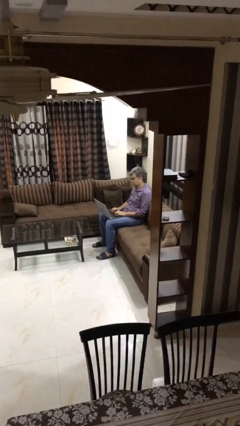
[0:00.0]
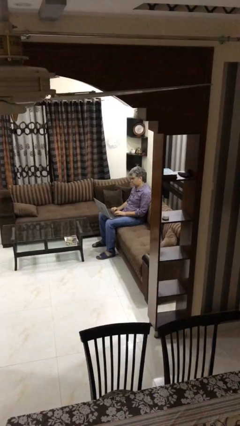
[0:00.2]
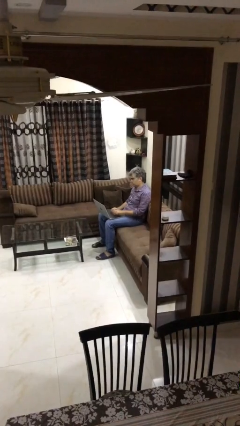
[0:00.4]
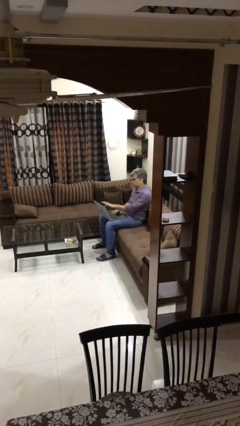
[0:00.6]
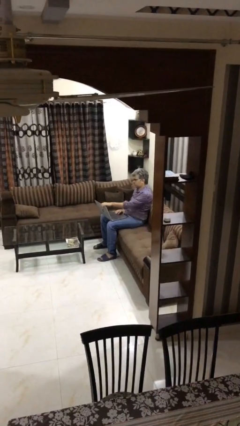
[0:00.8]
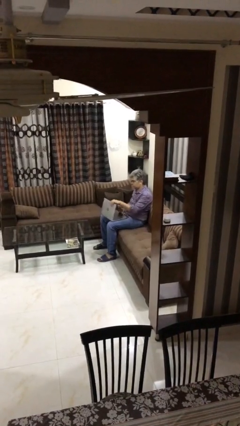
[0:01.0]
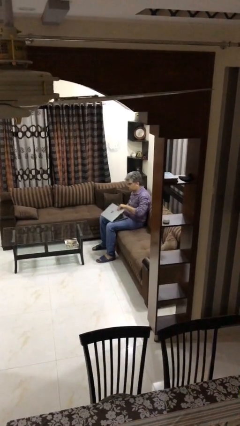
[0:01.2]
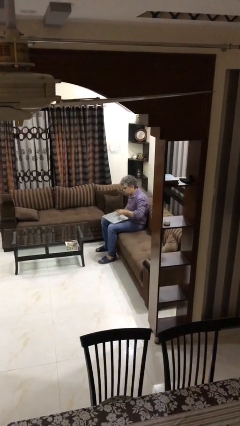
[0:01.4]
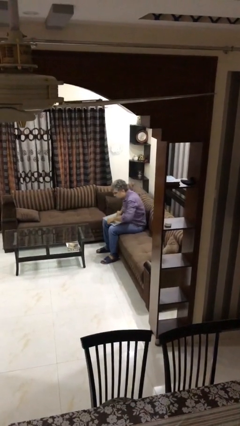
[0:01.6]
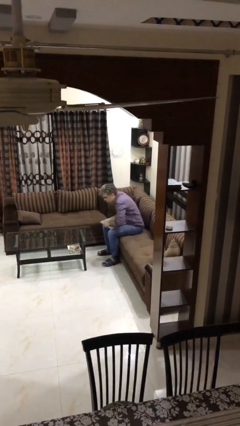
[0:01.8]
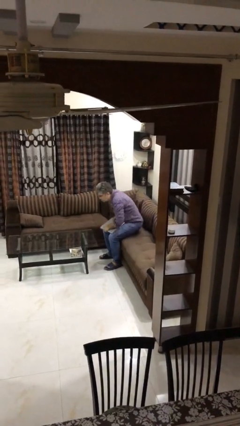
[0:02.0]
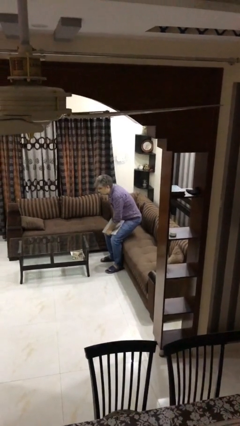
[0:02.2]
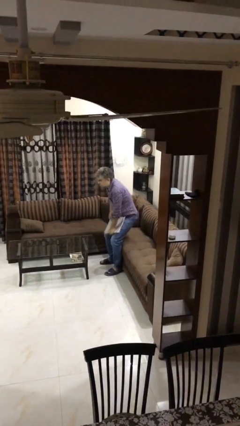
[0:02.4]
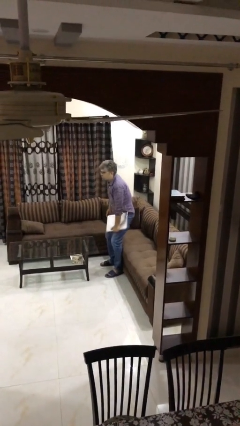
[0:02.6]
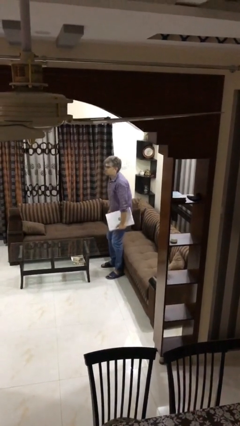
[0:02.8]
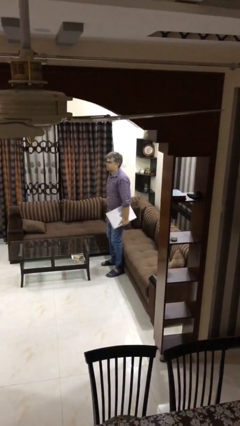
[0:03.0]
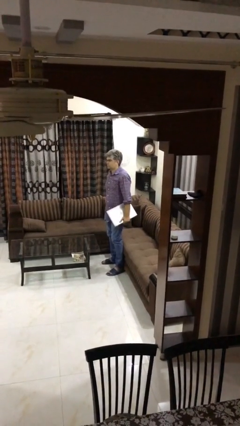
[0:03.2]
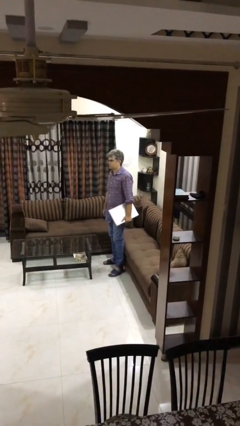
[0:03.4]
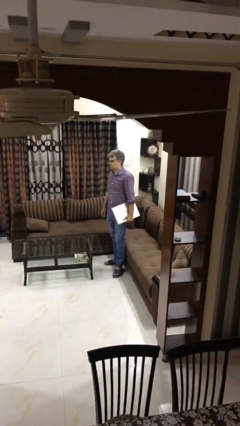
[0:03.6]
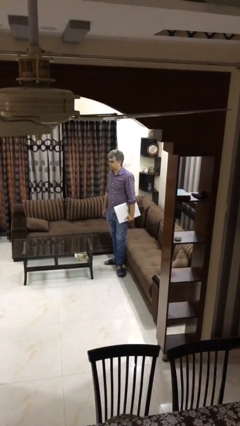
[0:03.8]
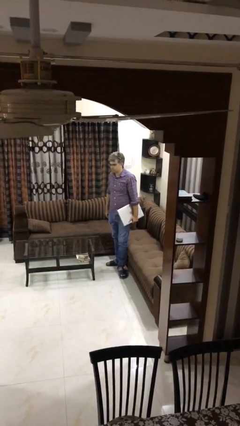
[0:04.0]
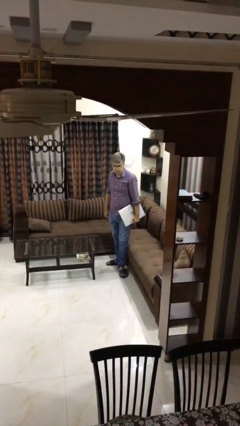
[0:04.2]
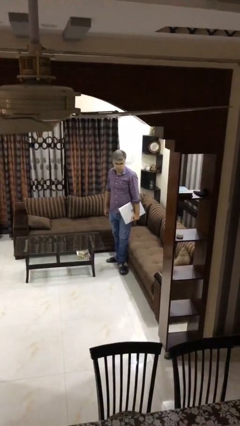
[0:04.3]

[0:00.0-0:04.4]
person stands up

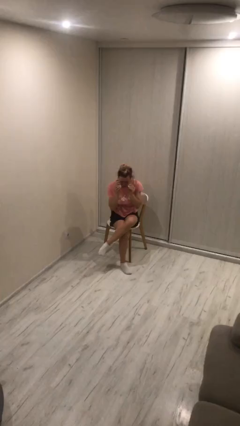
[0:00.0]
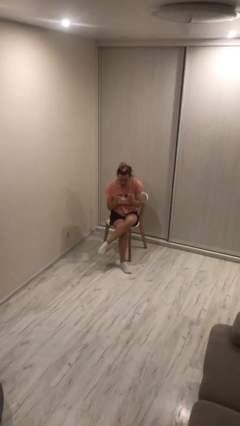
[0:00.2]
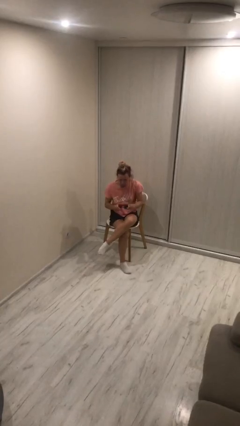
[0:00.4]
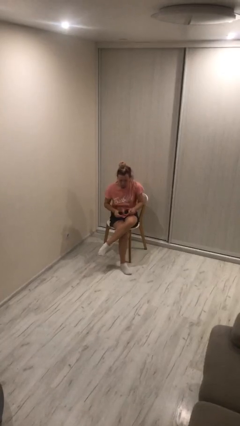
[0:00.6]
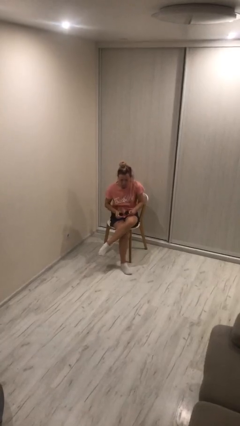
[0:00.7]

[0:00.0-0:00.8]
person takes off sunglasses

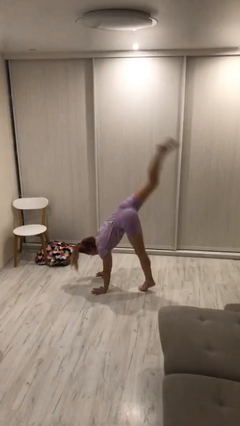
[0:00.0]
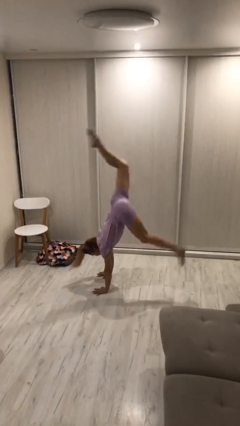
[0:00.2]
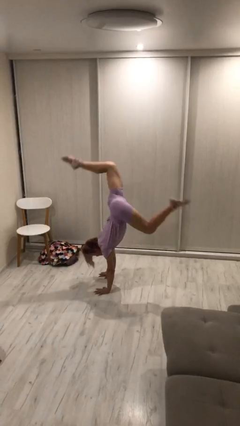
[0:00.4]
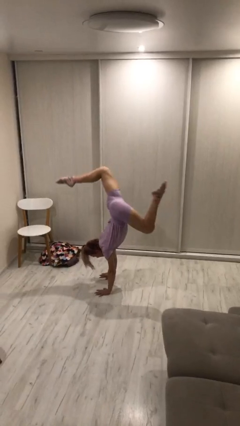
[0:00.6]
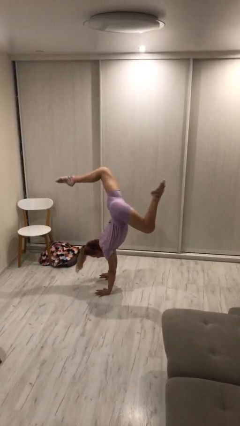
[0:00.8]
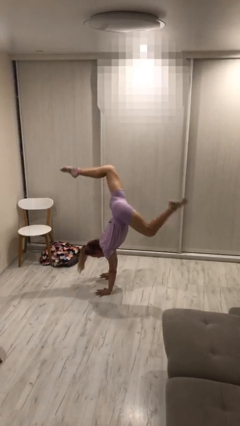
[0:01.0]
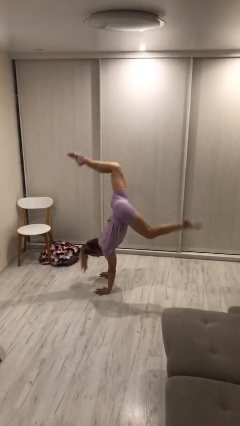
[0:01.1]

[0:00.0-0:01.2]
person handstand

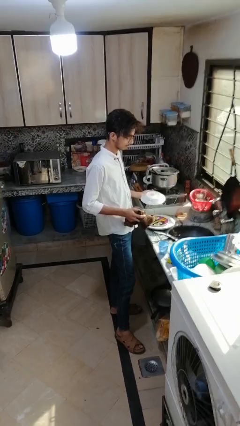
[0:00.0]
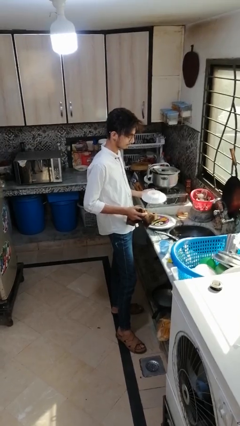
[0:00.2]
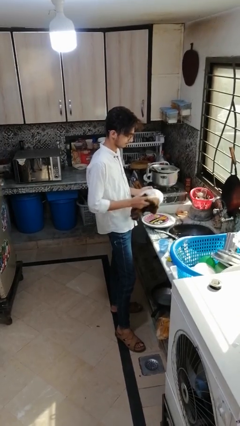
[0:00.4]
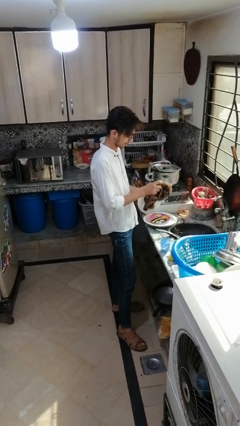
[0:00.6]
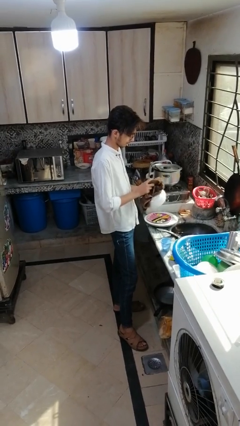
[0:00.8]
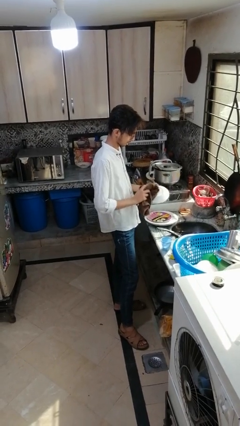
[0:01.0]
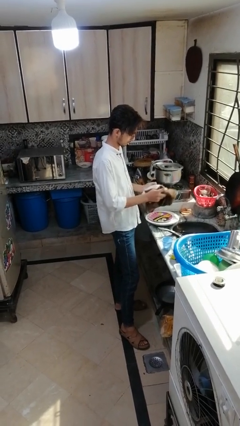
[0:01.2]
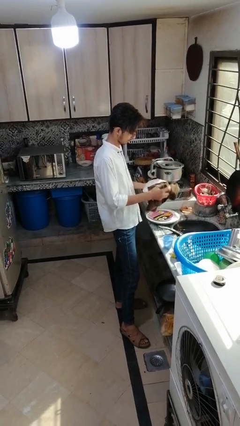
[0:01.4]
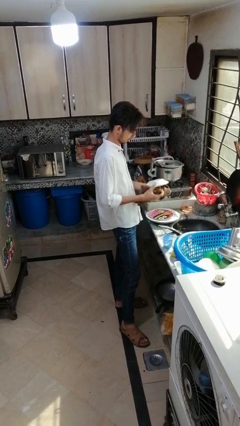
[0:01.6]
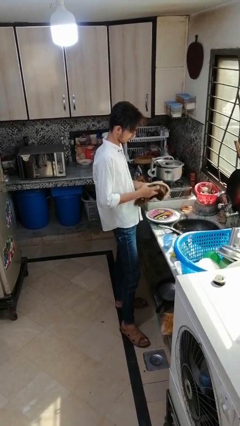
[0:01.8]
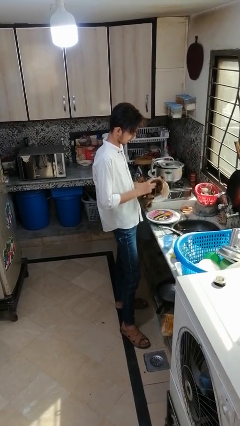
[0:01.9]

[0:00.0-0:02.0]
person dries dish

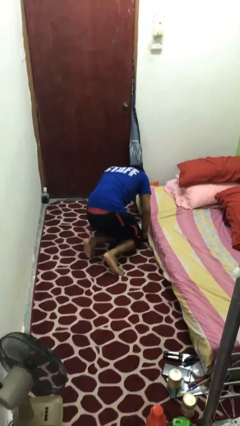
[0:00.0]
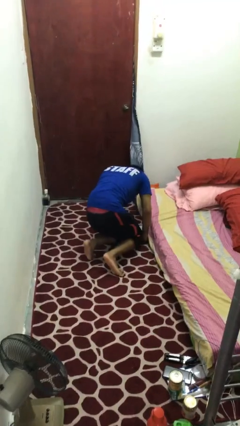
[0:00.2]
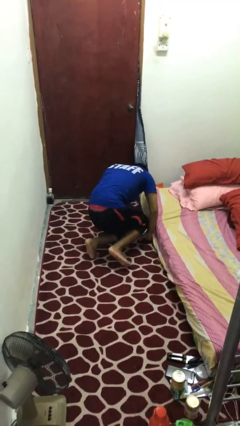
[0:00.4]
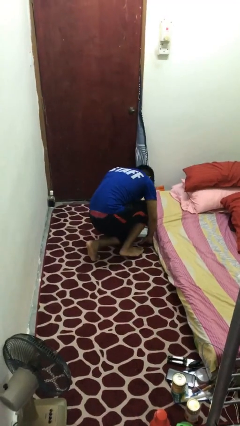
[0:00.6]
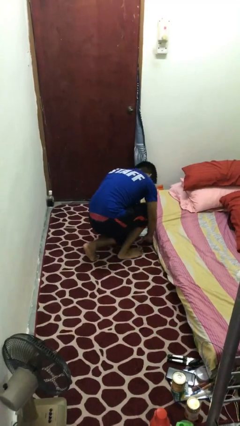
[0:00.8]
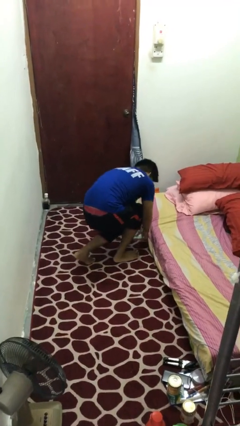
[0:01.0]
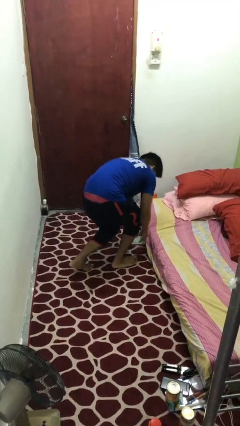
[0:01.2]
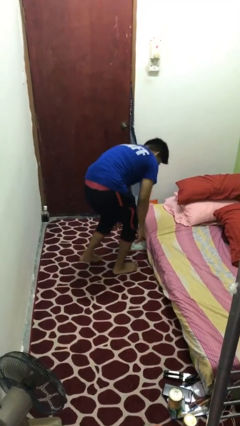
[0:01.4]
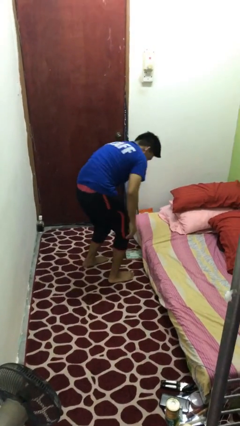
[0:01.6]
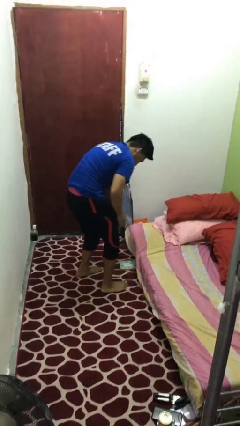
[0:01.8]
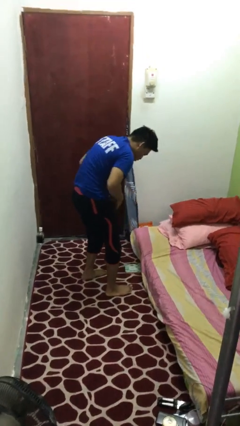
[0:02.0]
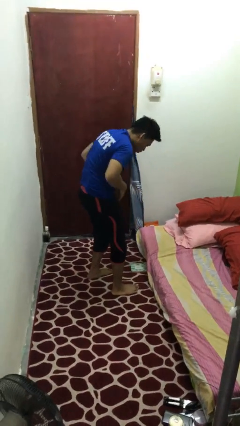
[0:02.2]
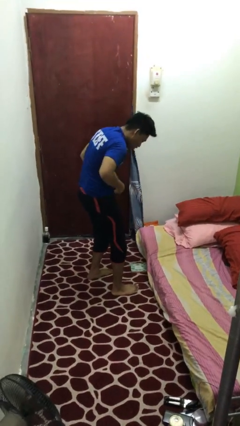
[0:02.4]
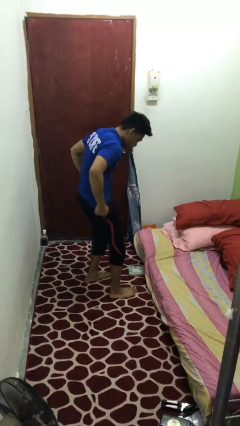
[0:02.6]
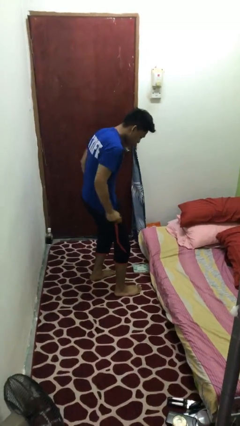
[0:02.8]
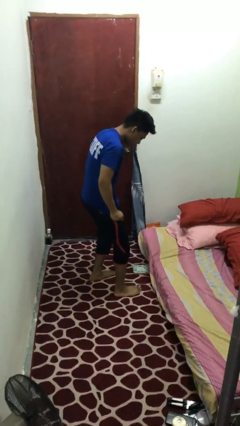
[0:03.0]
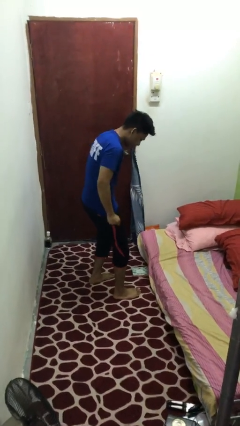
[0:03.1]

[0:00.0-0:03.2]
person stands up from floor

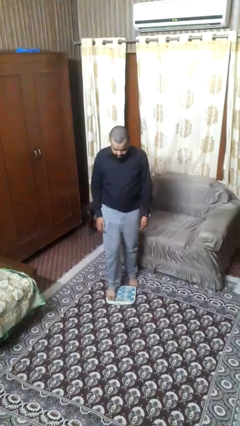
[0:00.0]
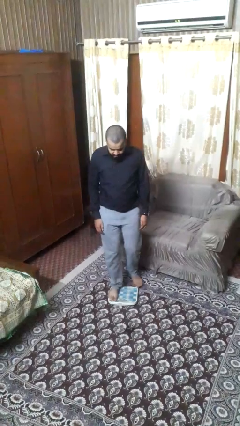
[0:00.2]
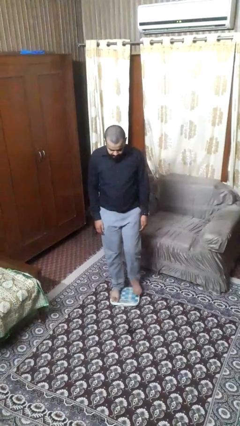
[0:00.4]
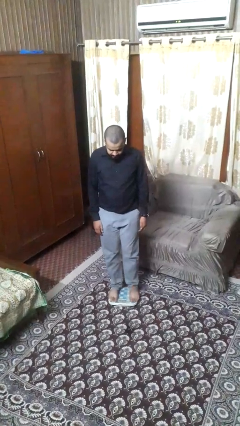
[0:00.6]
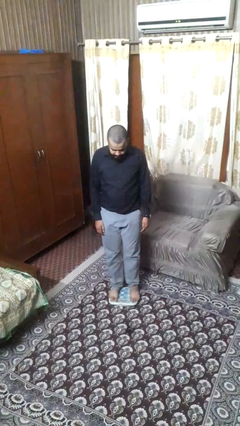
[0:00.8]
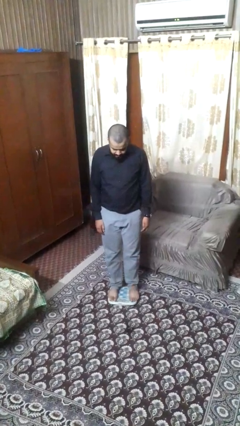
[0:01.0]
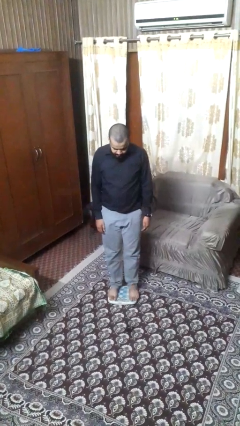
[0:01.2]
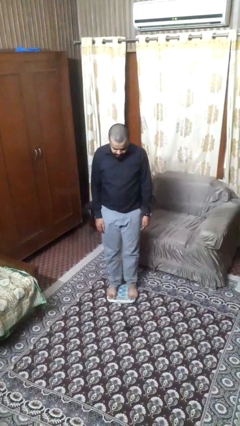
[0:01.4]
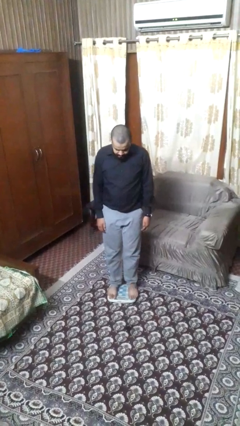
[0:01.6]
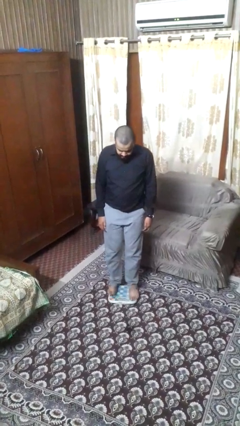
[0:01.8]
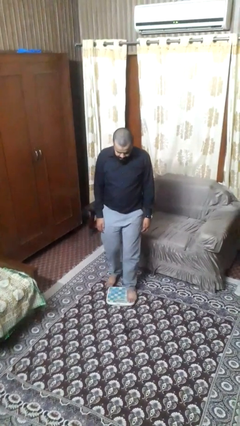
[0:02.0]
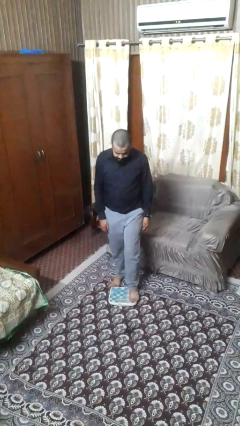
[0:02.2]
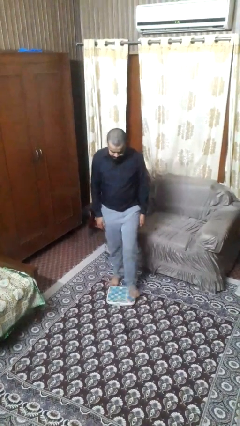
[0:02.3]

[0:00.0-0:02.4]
person uses bodyweight scale

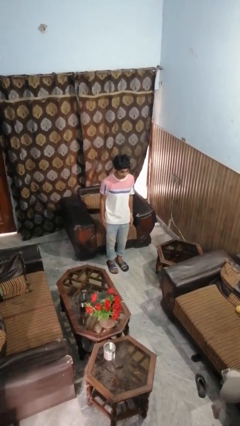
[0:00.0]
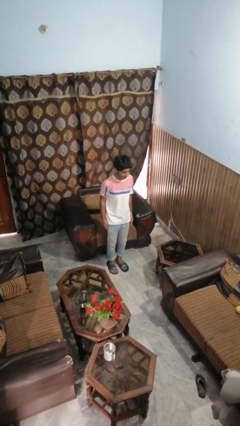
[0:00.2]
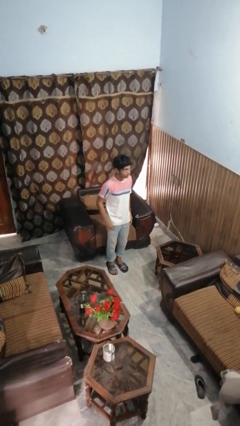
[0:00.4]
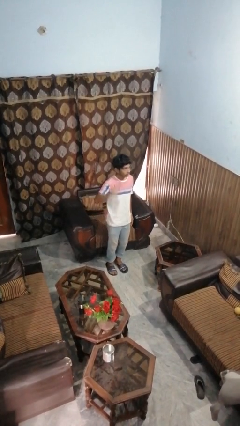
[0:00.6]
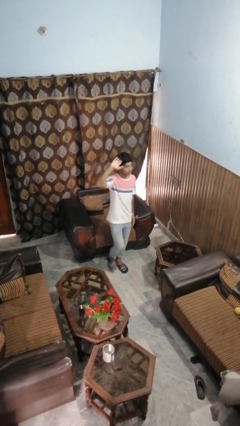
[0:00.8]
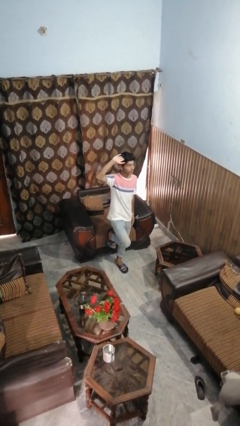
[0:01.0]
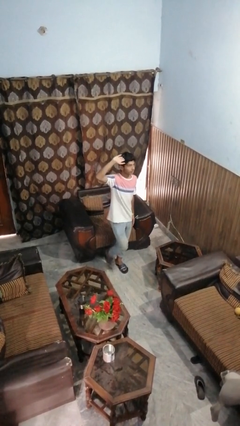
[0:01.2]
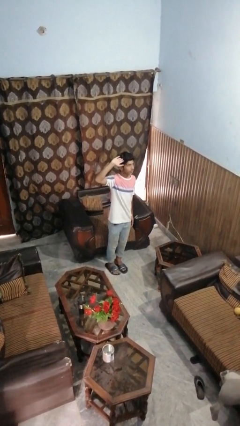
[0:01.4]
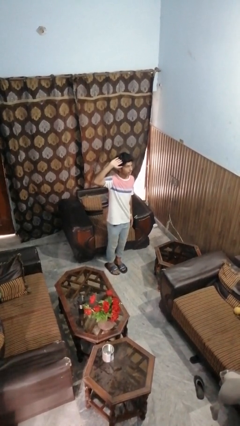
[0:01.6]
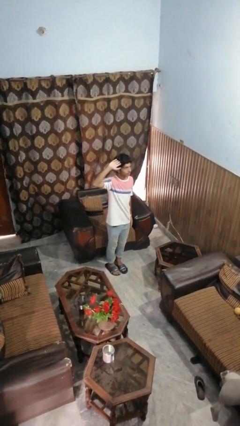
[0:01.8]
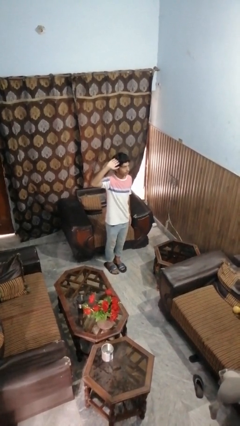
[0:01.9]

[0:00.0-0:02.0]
person salutes

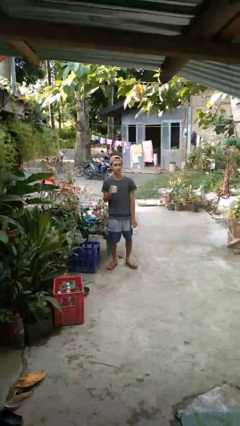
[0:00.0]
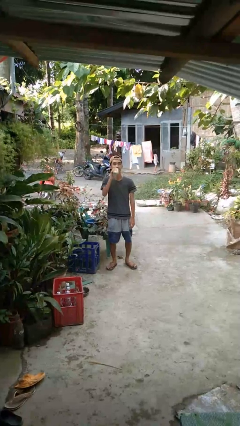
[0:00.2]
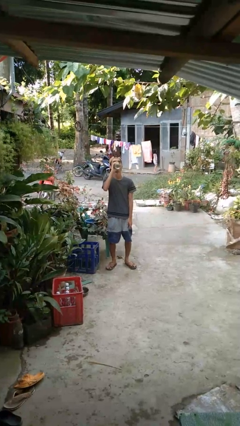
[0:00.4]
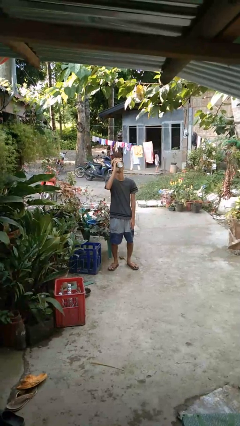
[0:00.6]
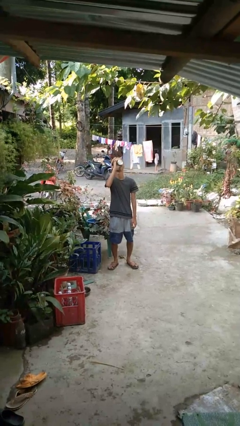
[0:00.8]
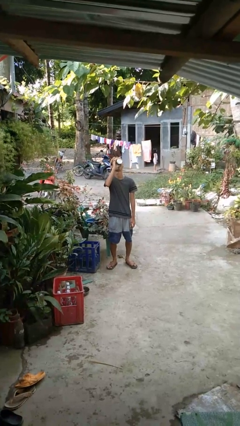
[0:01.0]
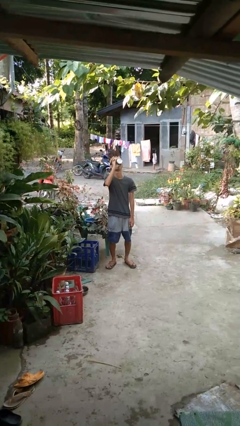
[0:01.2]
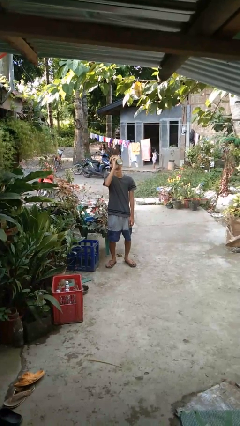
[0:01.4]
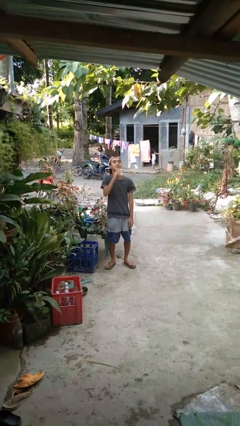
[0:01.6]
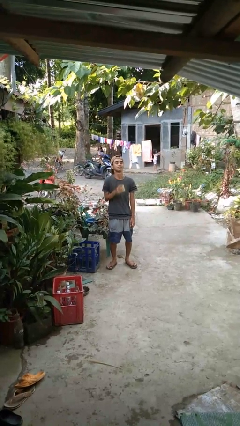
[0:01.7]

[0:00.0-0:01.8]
person drinks from beverage can
